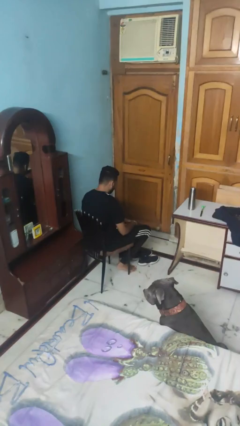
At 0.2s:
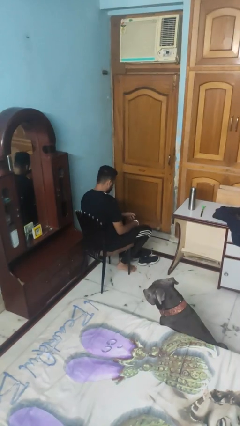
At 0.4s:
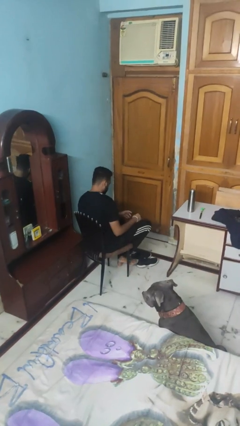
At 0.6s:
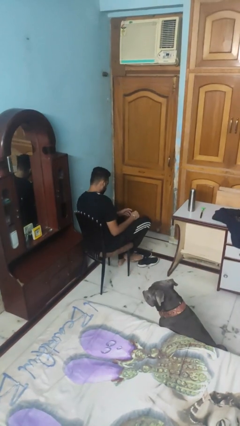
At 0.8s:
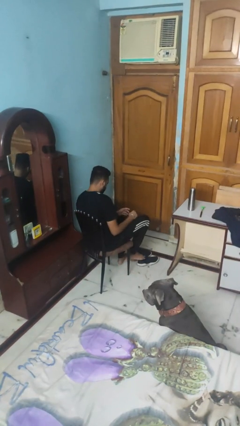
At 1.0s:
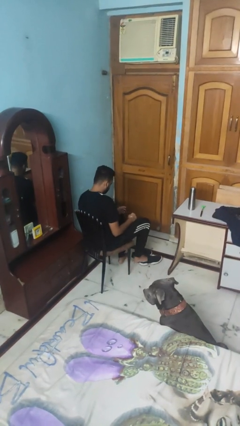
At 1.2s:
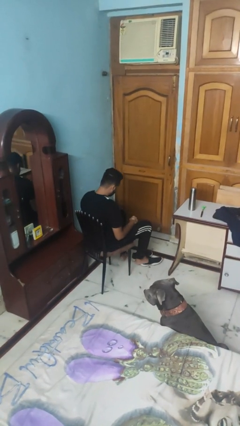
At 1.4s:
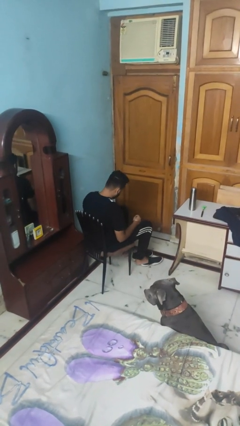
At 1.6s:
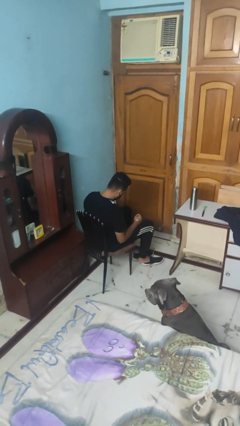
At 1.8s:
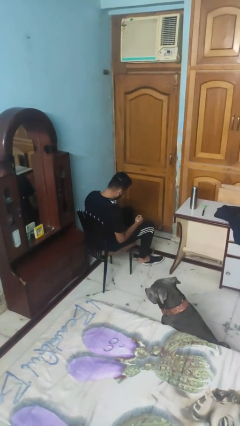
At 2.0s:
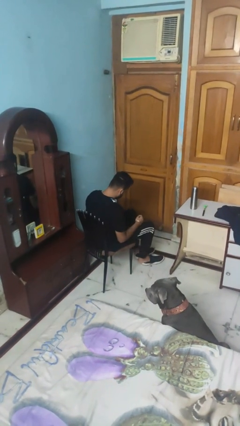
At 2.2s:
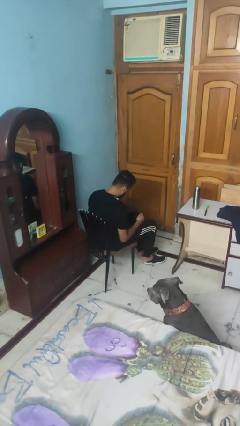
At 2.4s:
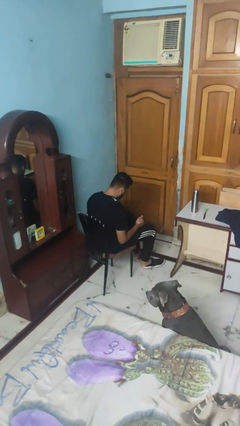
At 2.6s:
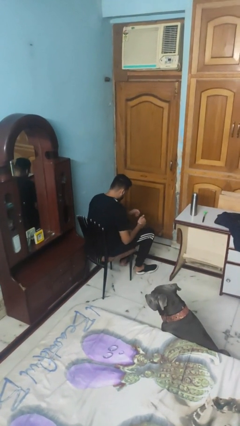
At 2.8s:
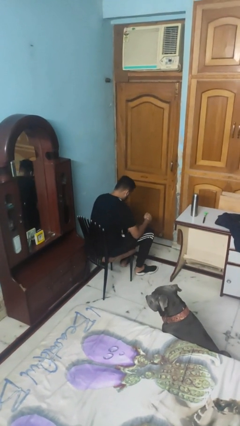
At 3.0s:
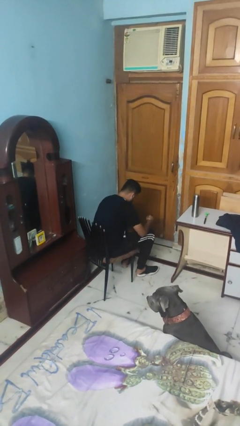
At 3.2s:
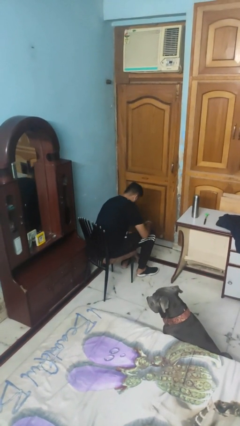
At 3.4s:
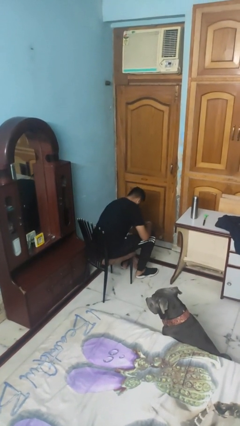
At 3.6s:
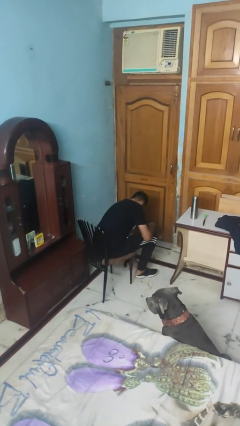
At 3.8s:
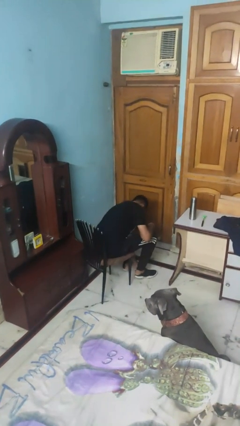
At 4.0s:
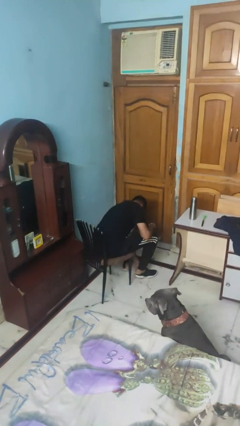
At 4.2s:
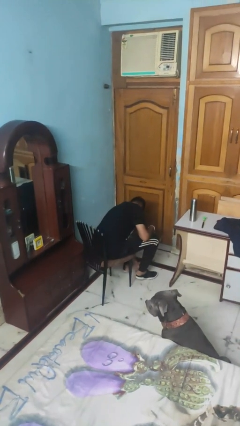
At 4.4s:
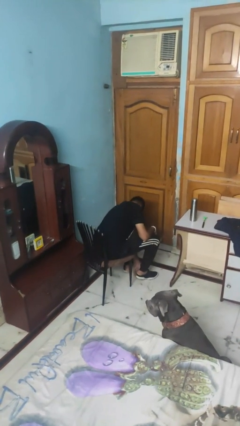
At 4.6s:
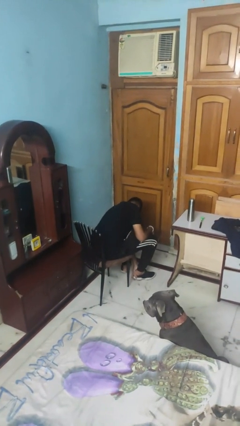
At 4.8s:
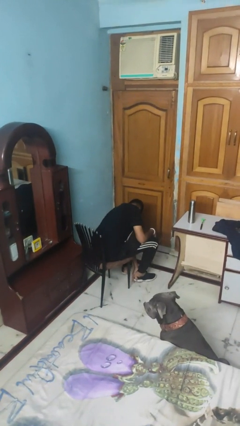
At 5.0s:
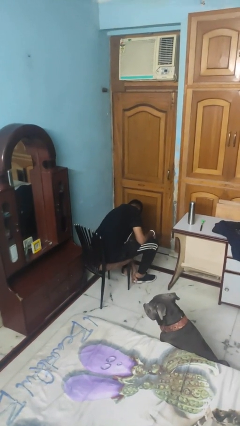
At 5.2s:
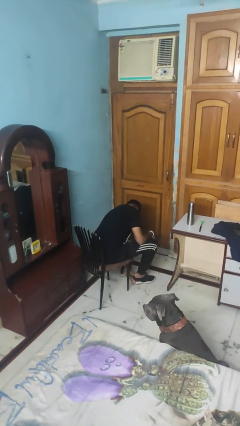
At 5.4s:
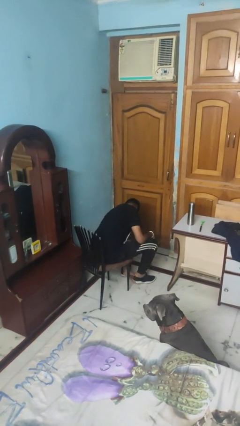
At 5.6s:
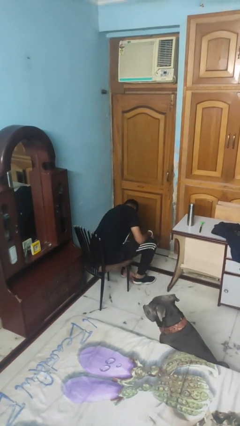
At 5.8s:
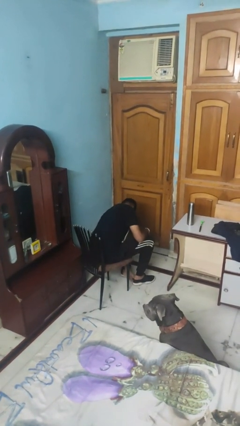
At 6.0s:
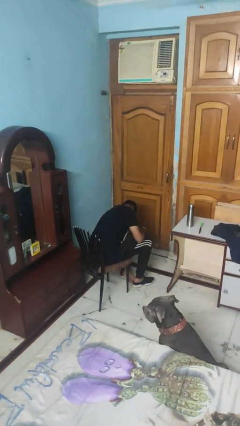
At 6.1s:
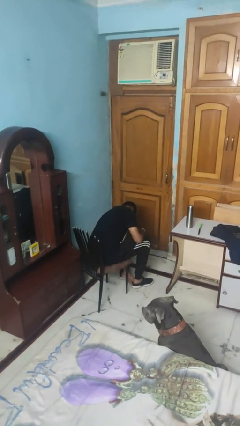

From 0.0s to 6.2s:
person puts on shoes

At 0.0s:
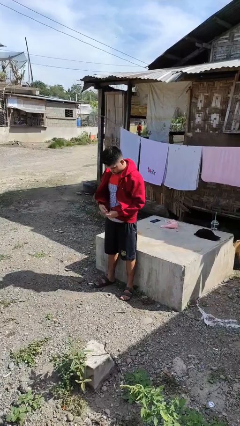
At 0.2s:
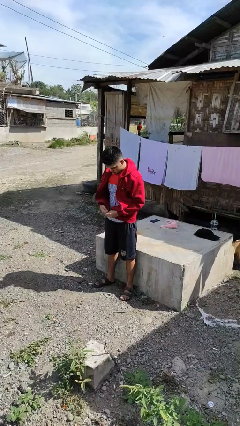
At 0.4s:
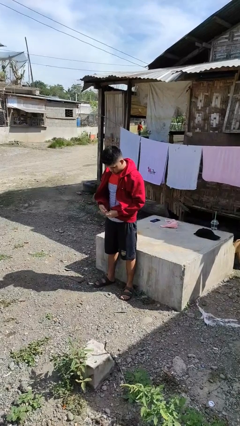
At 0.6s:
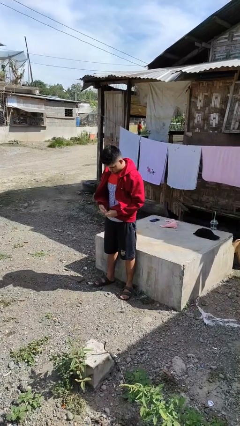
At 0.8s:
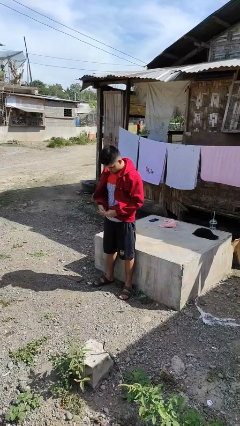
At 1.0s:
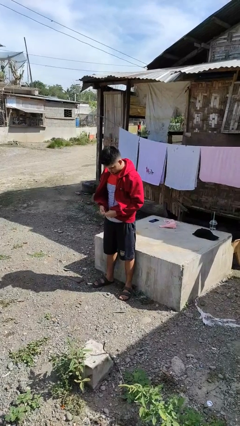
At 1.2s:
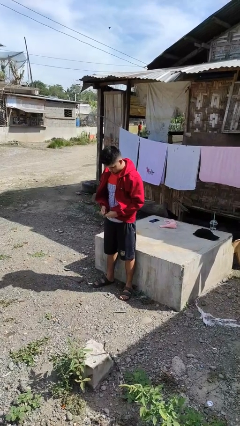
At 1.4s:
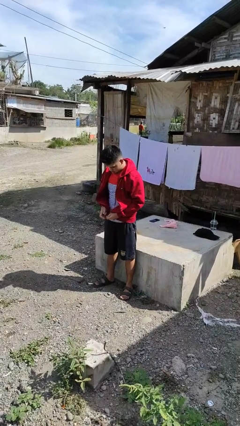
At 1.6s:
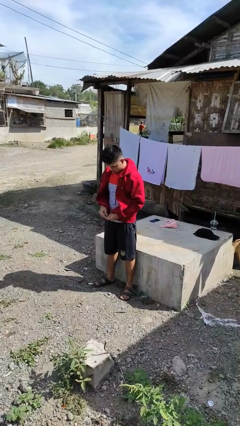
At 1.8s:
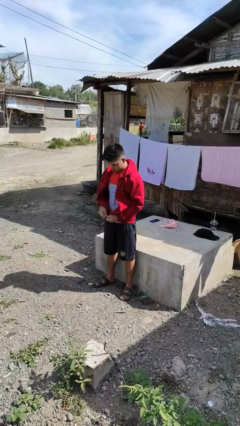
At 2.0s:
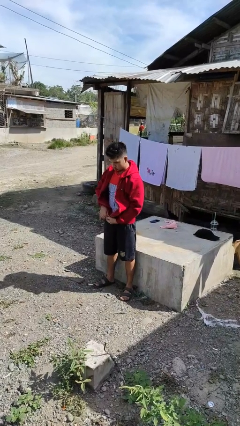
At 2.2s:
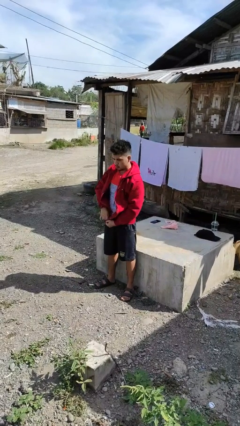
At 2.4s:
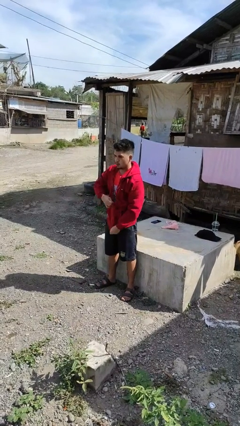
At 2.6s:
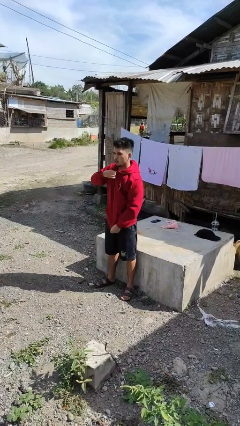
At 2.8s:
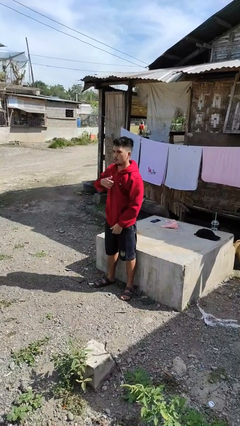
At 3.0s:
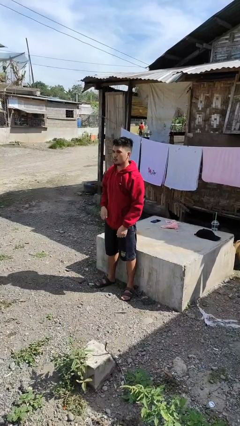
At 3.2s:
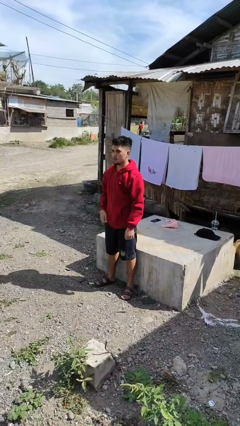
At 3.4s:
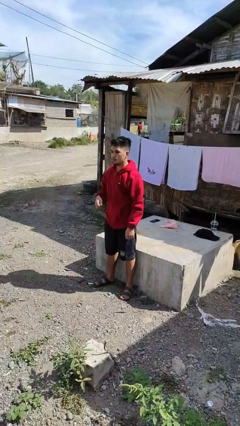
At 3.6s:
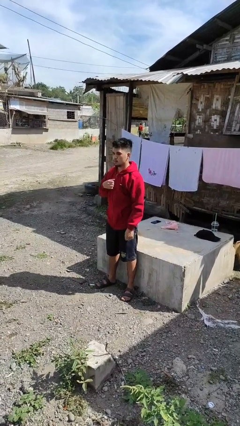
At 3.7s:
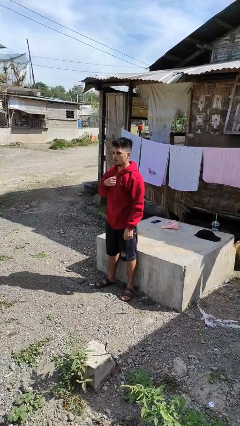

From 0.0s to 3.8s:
person zips up jacket

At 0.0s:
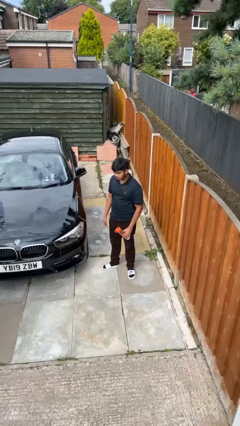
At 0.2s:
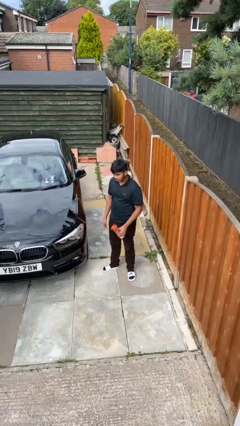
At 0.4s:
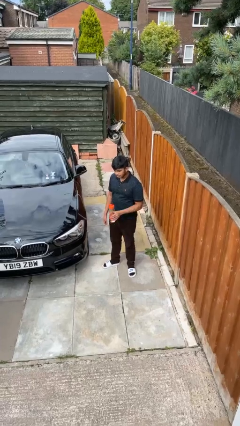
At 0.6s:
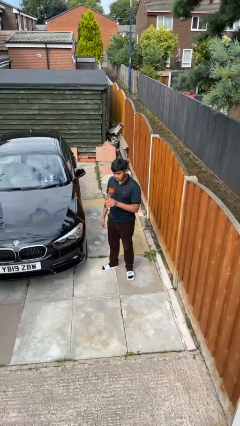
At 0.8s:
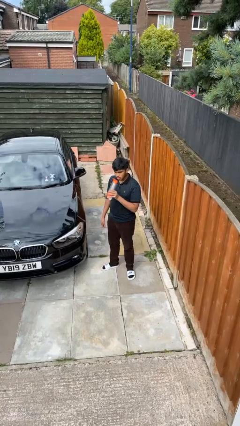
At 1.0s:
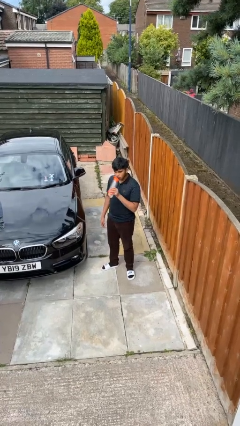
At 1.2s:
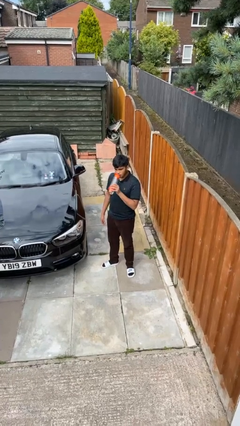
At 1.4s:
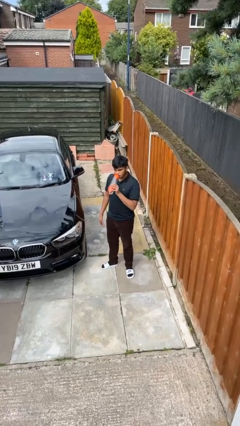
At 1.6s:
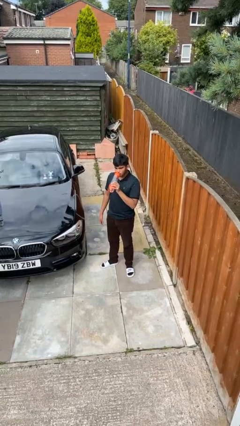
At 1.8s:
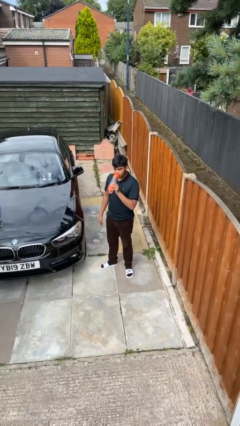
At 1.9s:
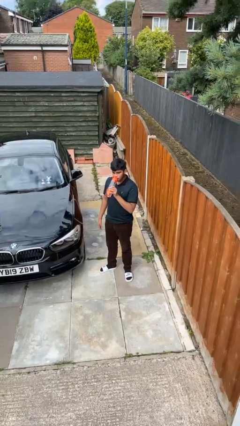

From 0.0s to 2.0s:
person drinks from bottle

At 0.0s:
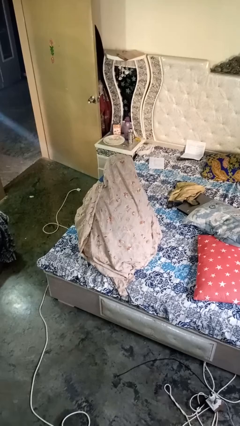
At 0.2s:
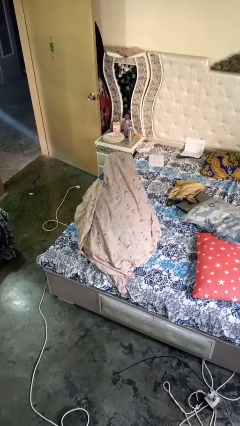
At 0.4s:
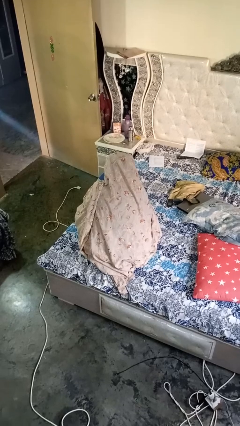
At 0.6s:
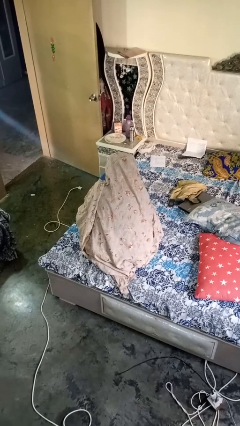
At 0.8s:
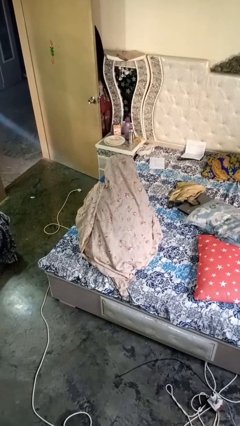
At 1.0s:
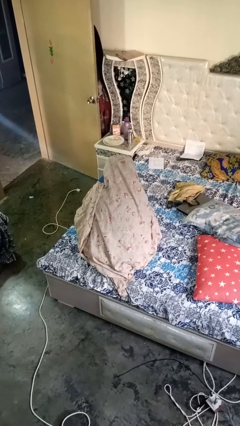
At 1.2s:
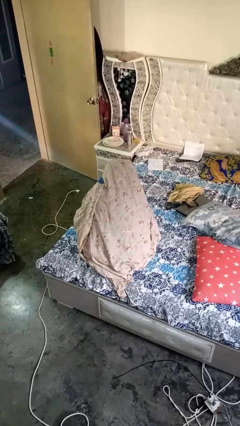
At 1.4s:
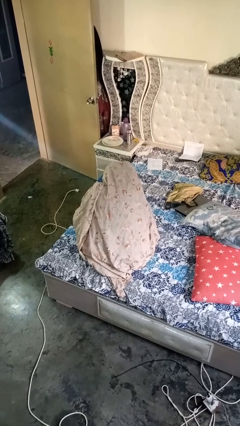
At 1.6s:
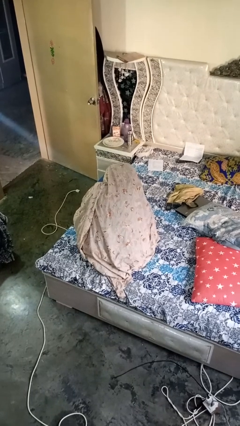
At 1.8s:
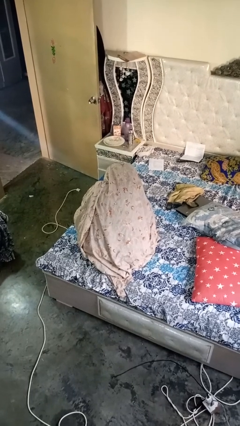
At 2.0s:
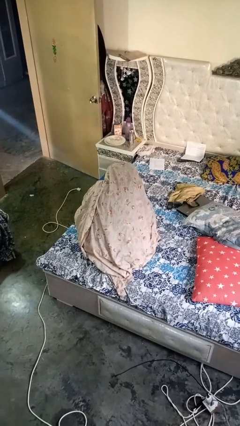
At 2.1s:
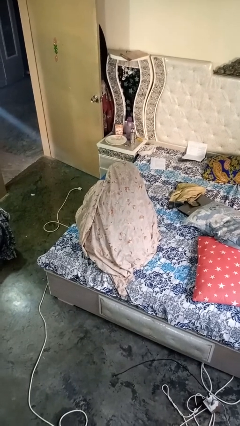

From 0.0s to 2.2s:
person looks at hands in lap

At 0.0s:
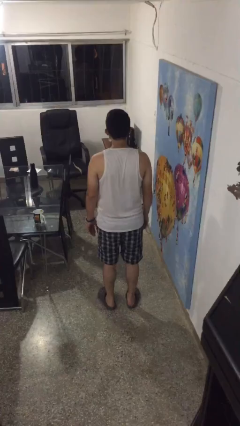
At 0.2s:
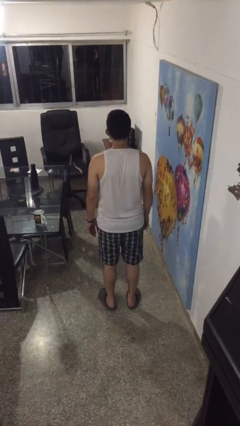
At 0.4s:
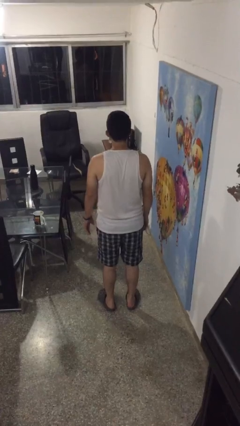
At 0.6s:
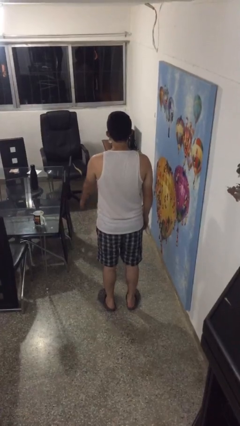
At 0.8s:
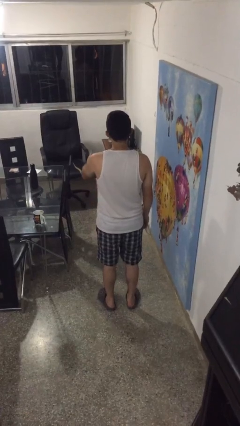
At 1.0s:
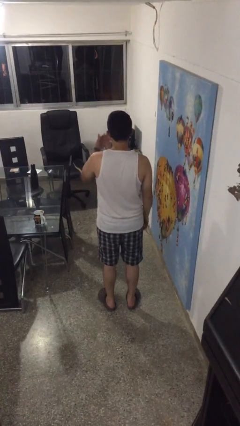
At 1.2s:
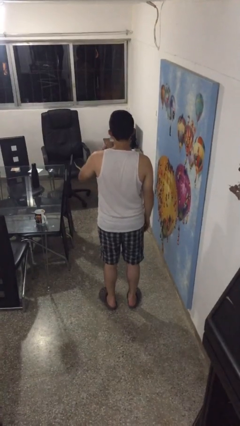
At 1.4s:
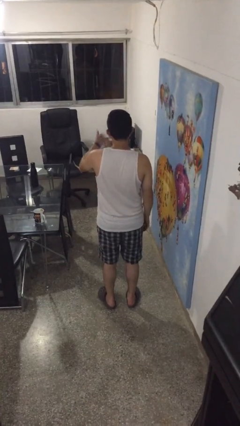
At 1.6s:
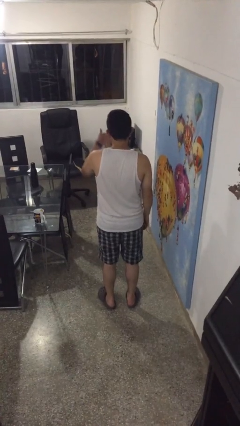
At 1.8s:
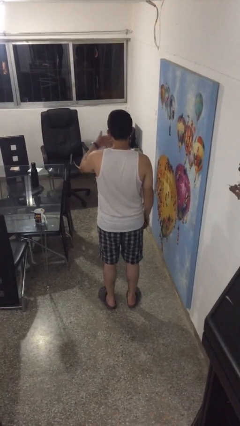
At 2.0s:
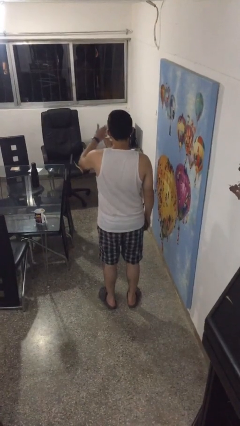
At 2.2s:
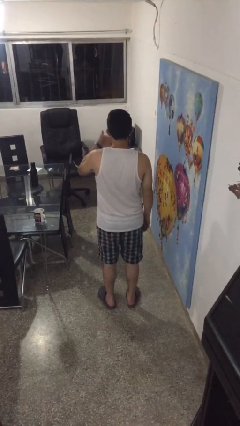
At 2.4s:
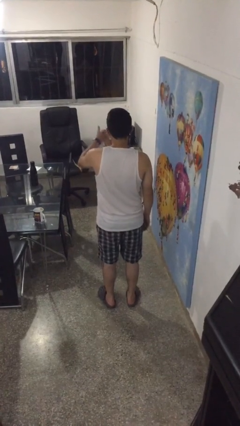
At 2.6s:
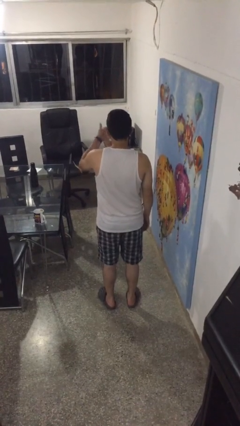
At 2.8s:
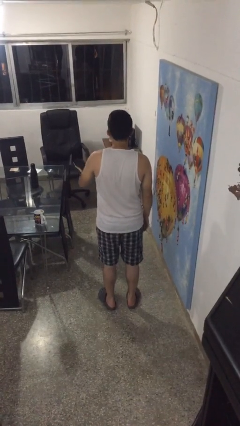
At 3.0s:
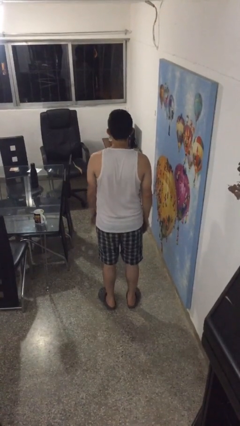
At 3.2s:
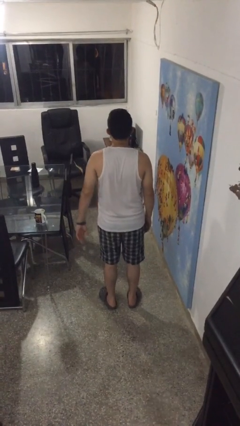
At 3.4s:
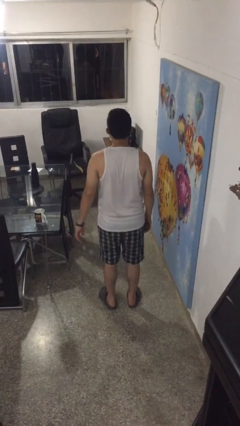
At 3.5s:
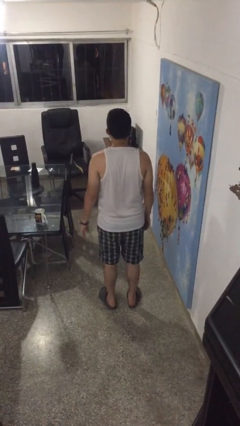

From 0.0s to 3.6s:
person gestures come here

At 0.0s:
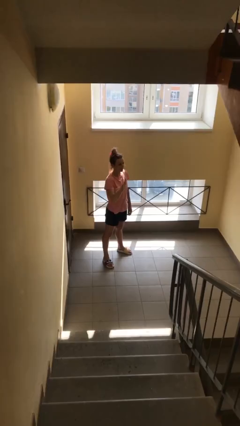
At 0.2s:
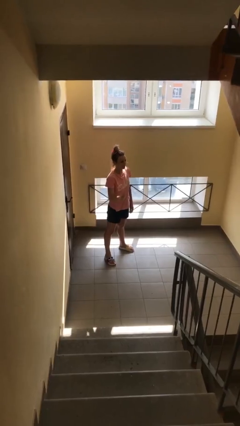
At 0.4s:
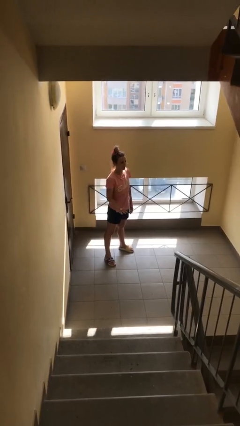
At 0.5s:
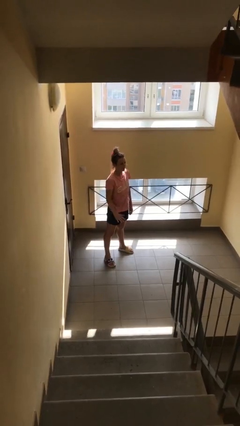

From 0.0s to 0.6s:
person gestures lower hand
